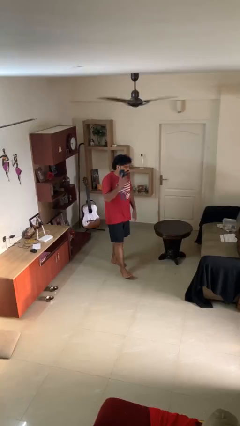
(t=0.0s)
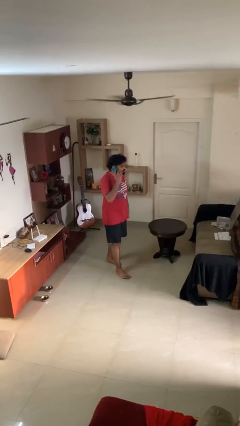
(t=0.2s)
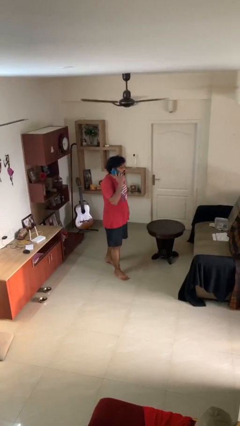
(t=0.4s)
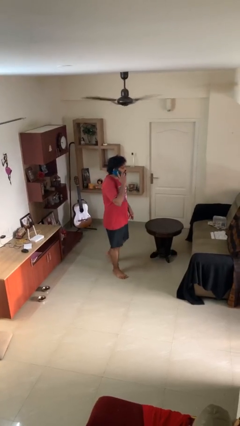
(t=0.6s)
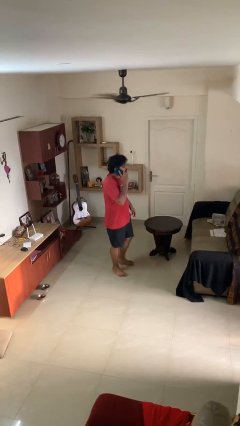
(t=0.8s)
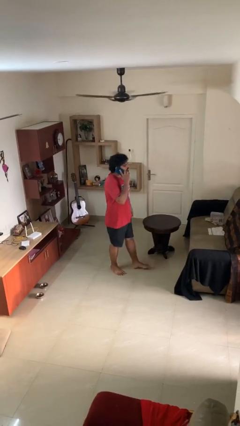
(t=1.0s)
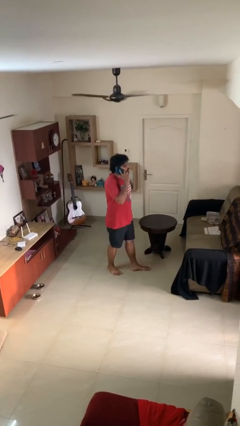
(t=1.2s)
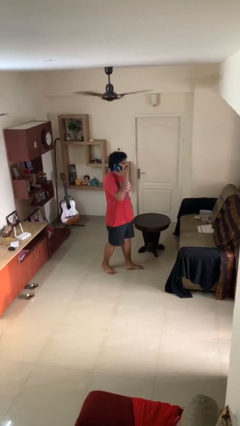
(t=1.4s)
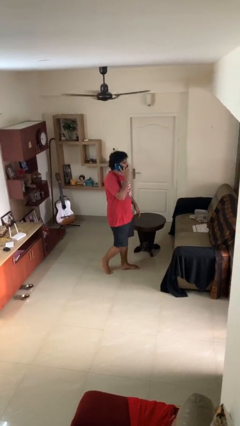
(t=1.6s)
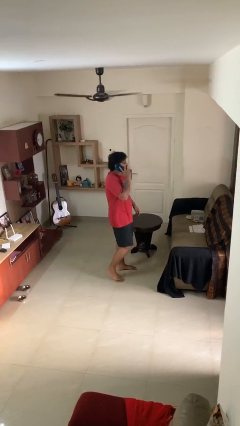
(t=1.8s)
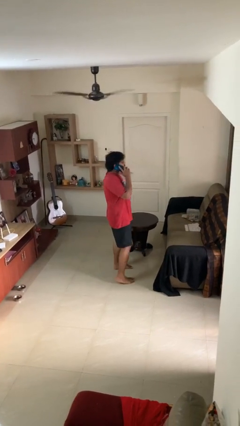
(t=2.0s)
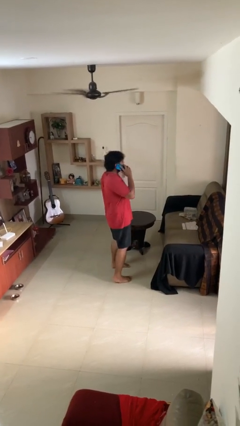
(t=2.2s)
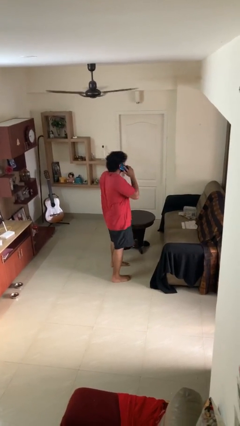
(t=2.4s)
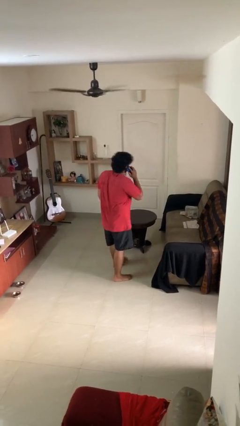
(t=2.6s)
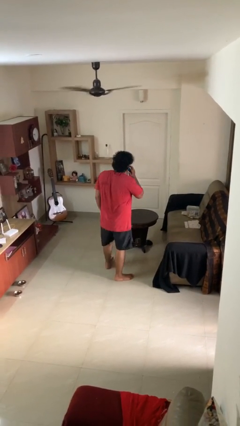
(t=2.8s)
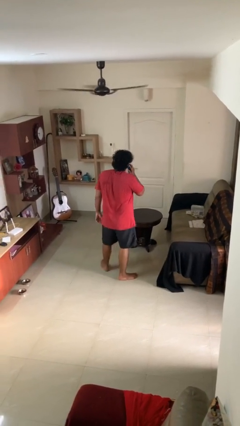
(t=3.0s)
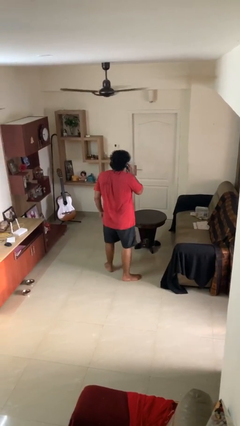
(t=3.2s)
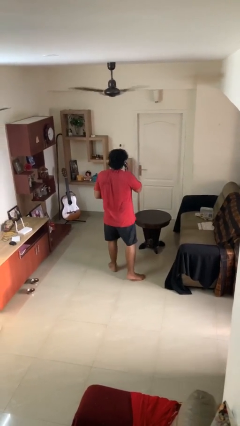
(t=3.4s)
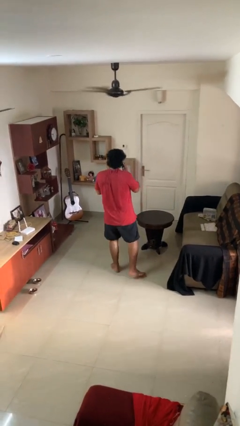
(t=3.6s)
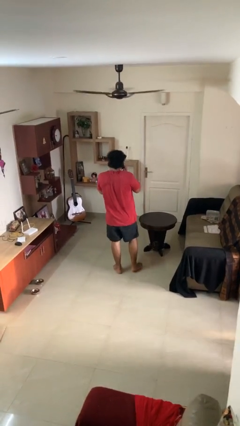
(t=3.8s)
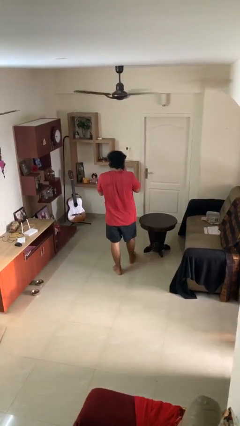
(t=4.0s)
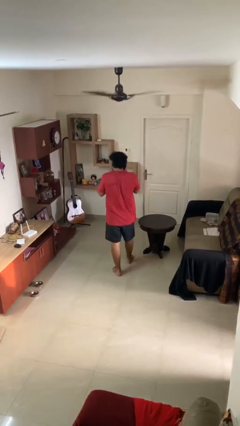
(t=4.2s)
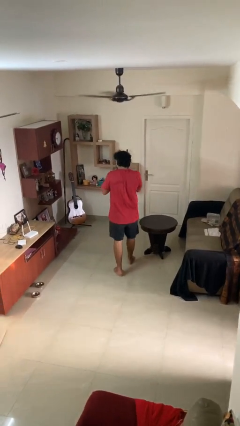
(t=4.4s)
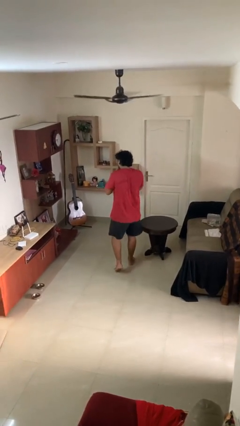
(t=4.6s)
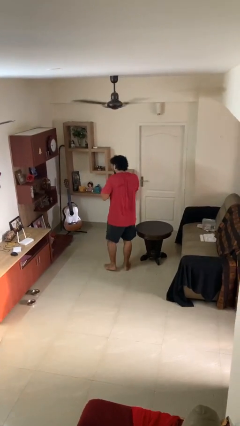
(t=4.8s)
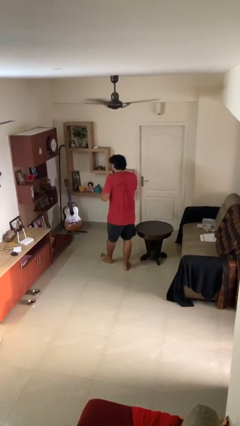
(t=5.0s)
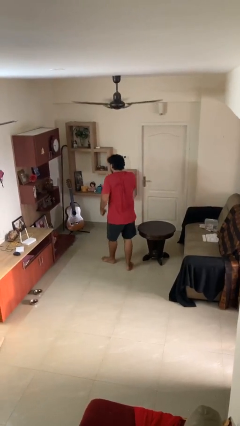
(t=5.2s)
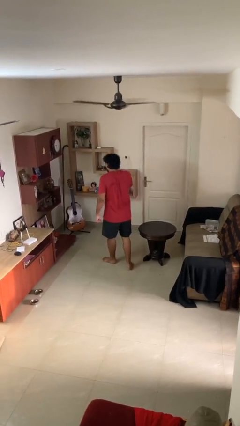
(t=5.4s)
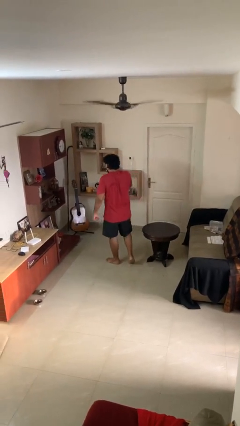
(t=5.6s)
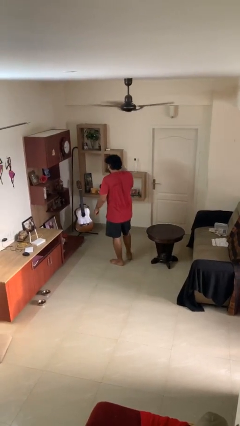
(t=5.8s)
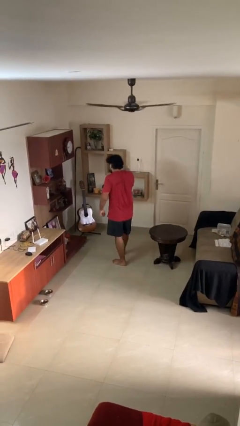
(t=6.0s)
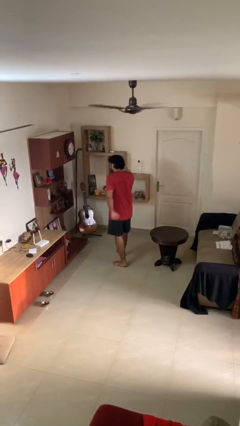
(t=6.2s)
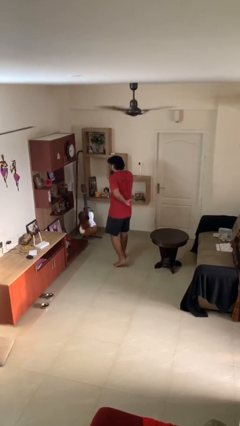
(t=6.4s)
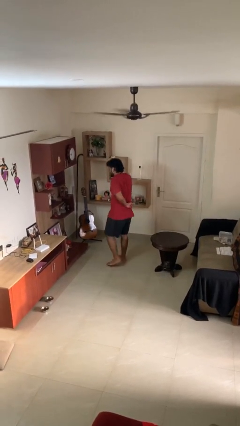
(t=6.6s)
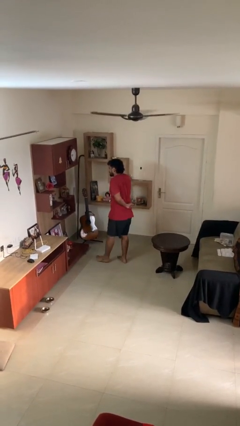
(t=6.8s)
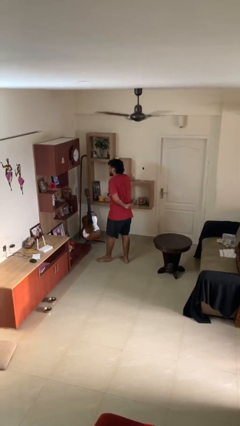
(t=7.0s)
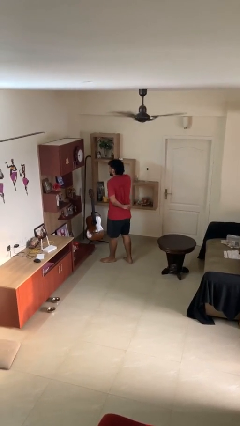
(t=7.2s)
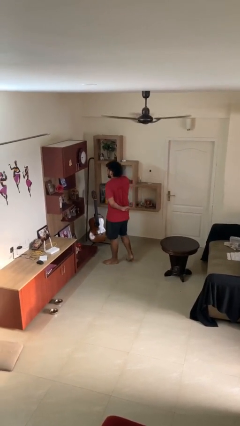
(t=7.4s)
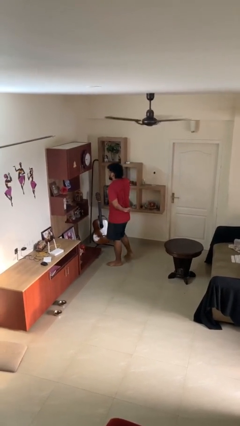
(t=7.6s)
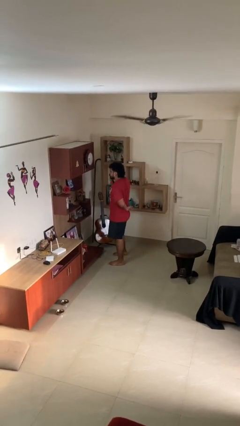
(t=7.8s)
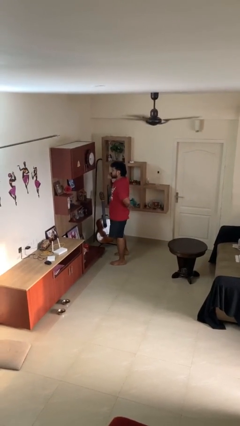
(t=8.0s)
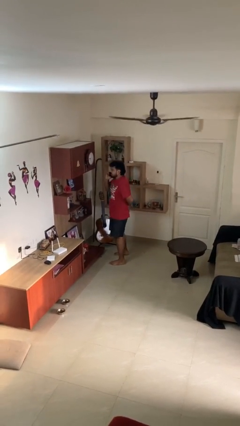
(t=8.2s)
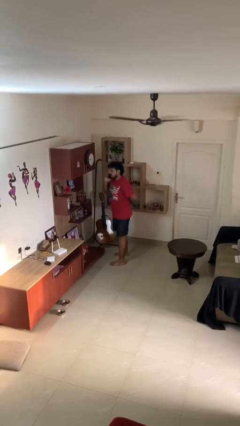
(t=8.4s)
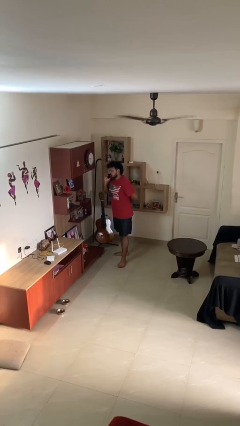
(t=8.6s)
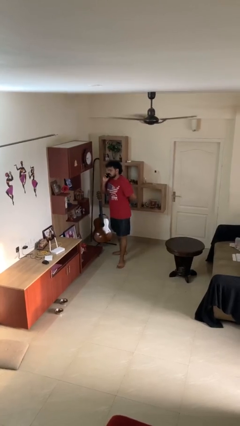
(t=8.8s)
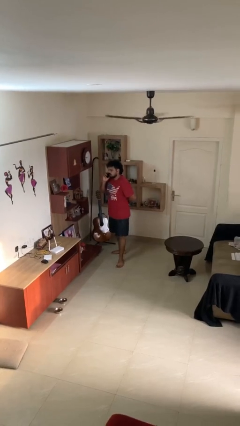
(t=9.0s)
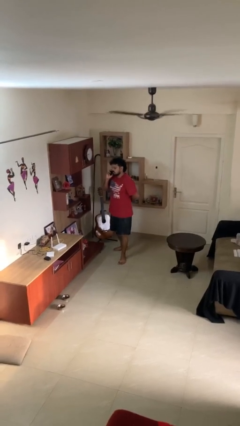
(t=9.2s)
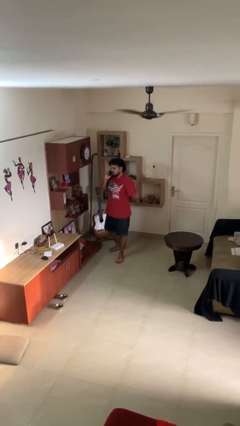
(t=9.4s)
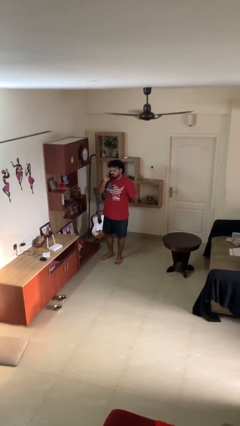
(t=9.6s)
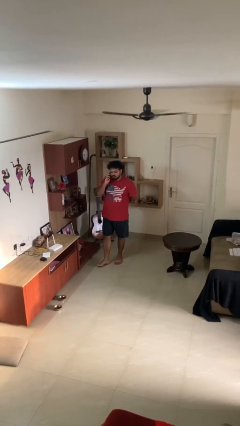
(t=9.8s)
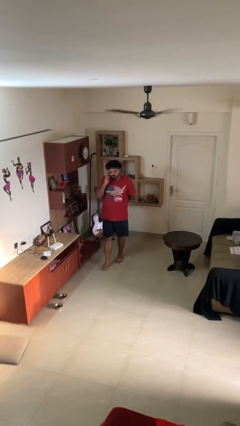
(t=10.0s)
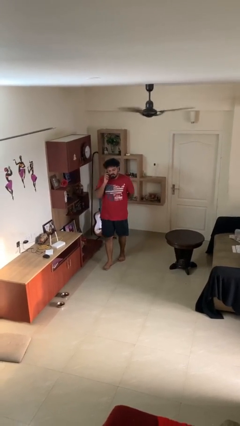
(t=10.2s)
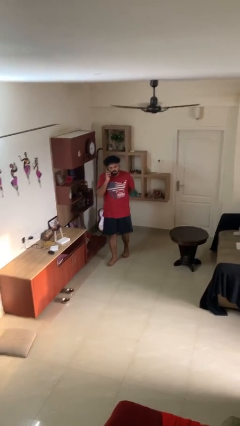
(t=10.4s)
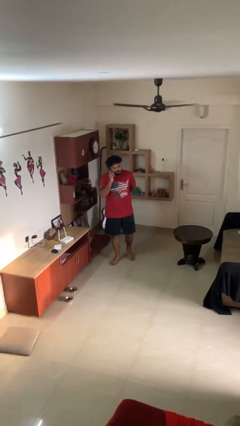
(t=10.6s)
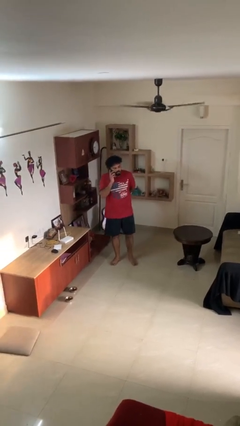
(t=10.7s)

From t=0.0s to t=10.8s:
person talks on phone

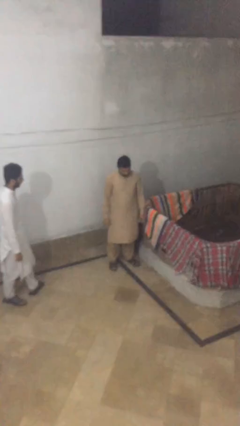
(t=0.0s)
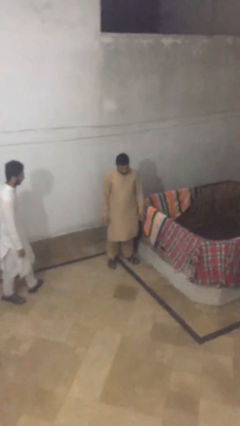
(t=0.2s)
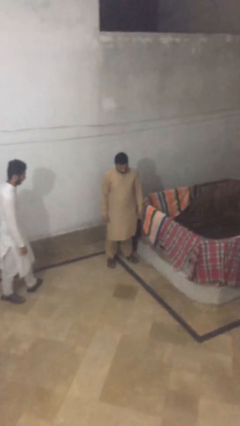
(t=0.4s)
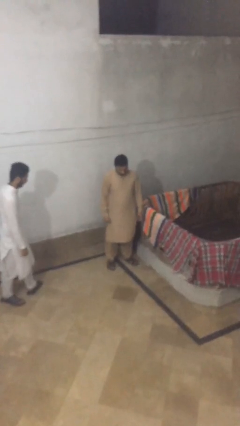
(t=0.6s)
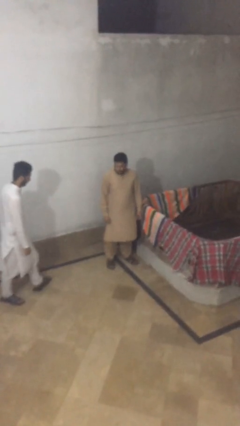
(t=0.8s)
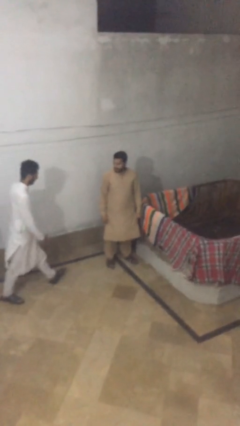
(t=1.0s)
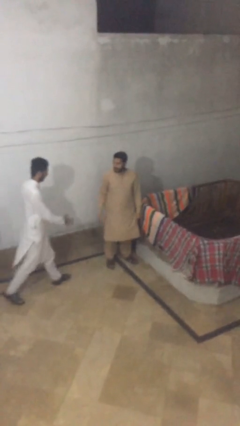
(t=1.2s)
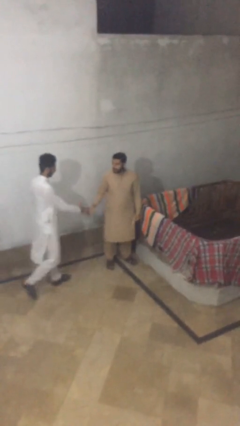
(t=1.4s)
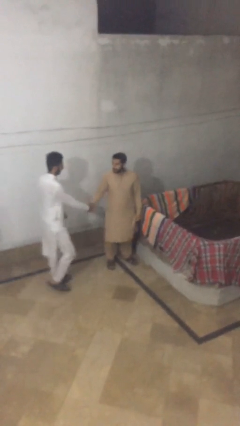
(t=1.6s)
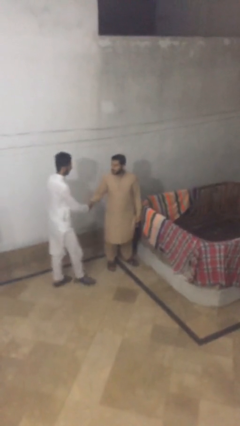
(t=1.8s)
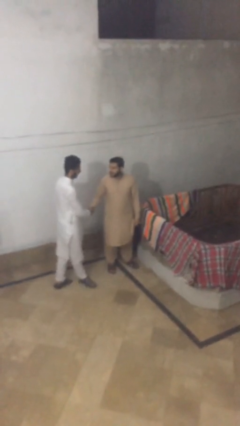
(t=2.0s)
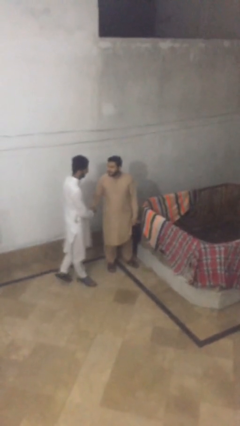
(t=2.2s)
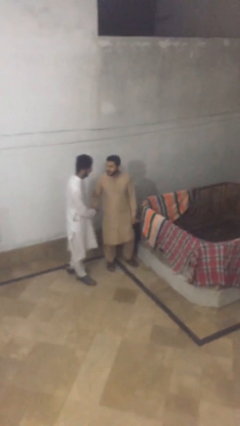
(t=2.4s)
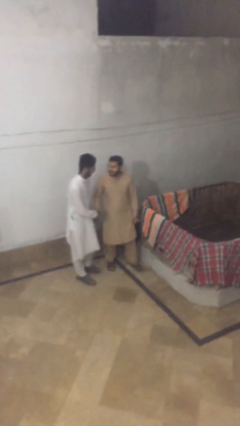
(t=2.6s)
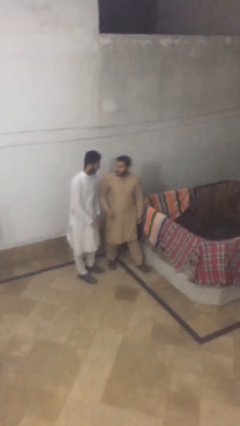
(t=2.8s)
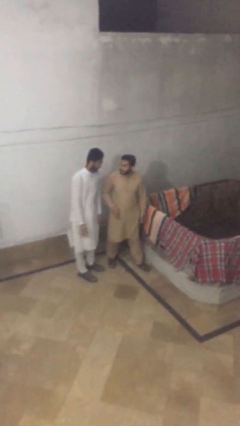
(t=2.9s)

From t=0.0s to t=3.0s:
person shakes hand

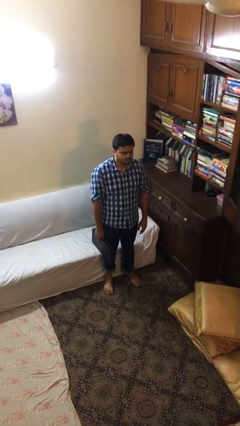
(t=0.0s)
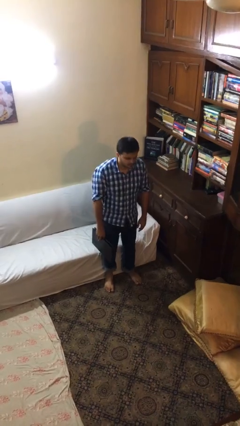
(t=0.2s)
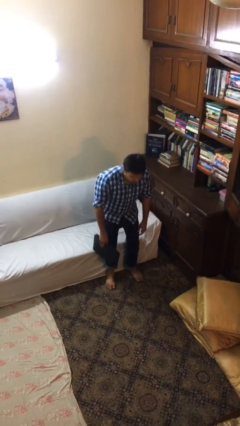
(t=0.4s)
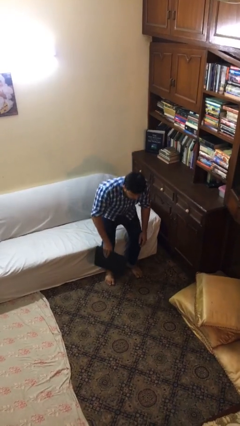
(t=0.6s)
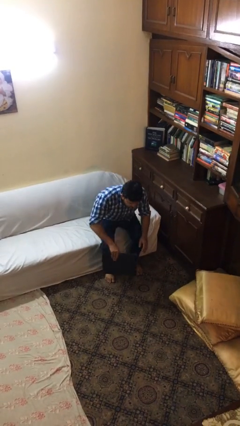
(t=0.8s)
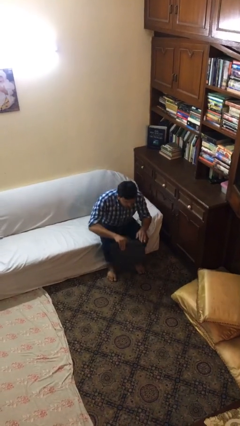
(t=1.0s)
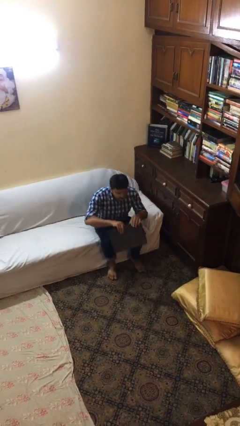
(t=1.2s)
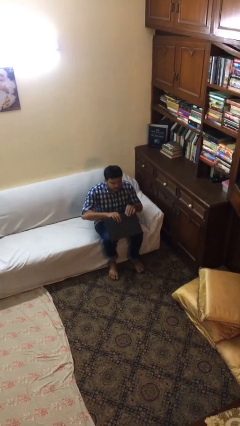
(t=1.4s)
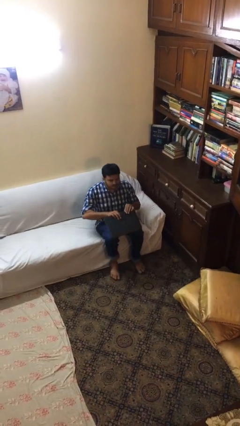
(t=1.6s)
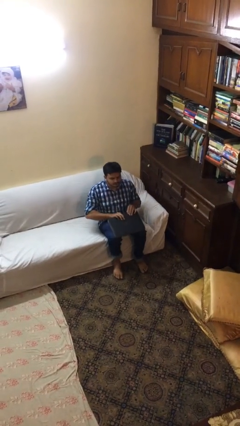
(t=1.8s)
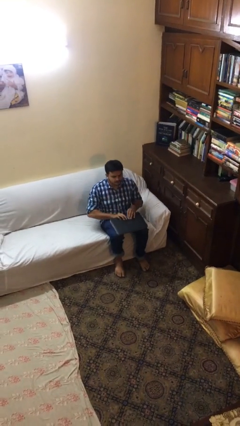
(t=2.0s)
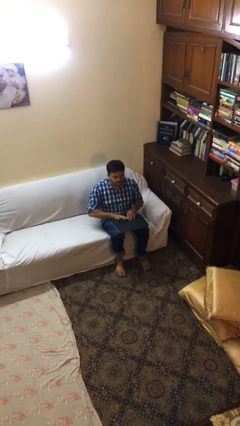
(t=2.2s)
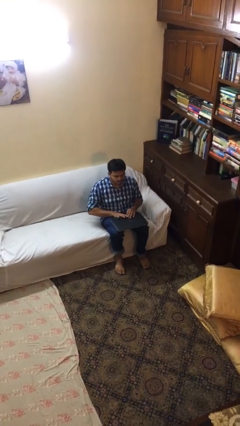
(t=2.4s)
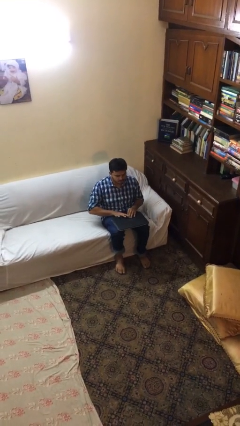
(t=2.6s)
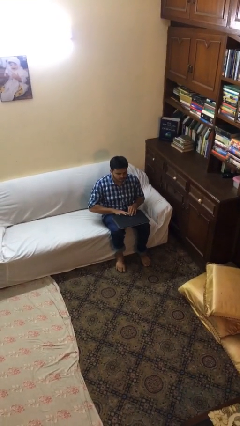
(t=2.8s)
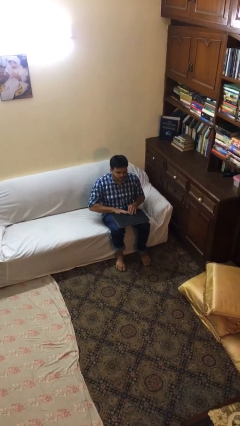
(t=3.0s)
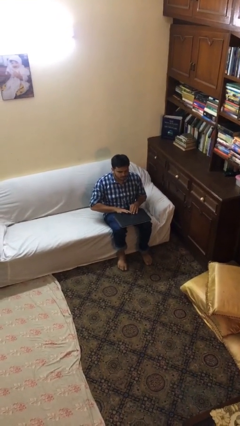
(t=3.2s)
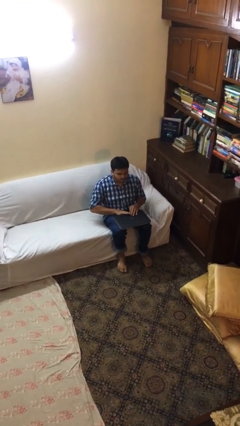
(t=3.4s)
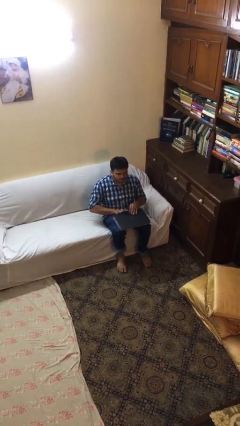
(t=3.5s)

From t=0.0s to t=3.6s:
person sits down

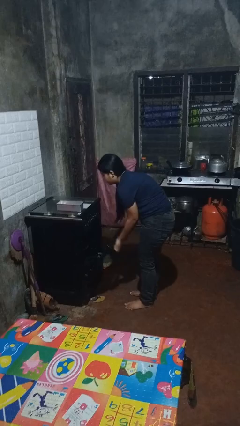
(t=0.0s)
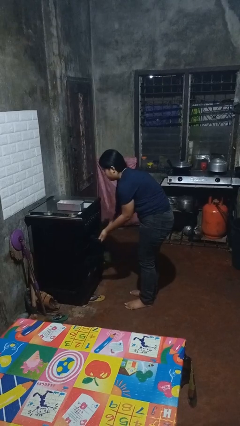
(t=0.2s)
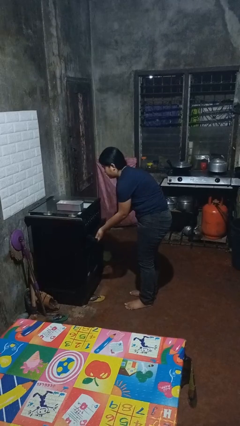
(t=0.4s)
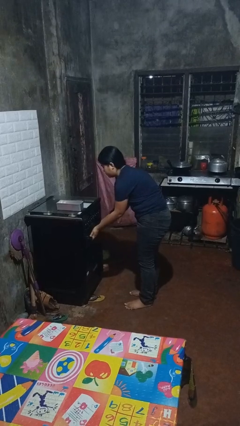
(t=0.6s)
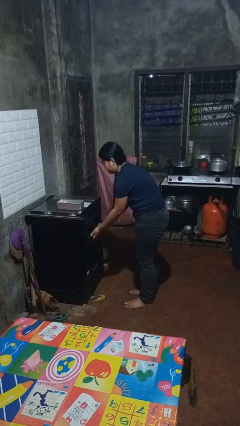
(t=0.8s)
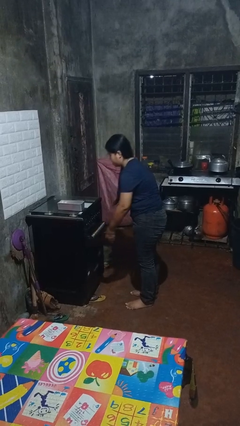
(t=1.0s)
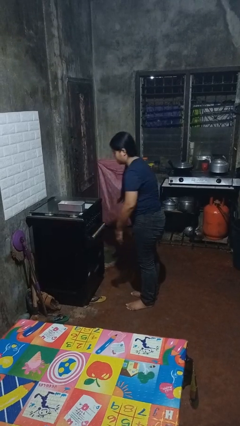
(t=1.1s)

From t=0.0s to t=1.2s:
person closes oven door
